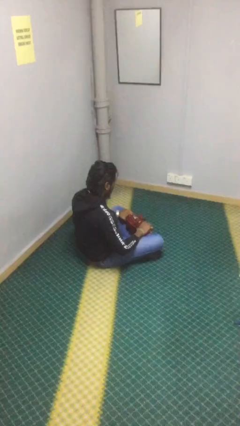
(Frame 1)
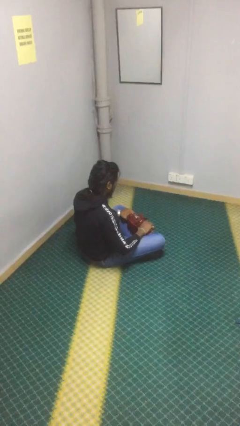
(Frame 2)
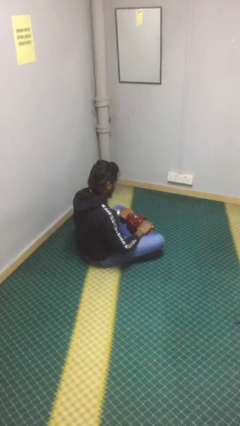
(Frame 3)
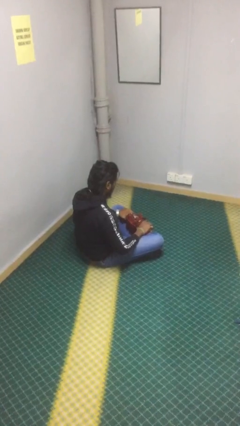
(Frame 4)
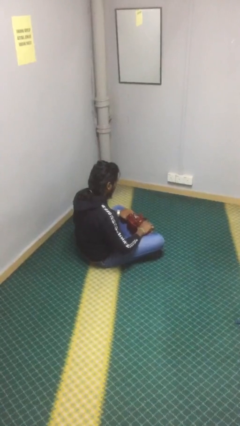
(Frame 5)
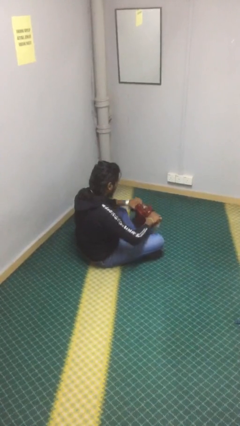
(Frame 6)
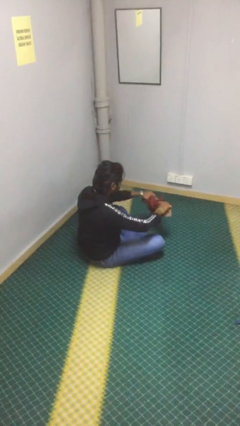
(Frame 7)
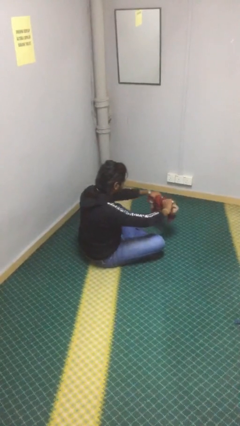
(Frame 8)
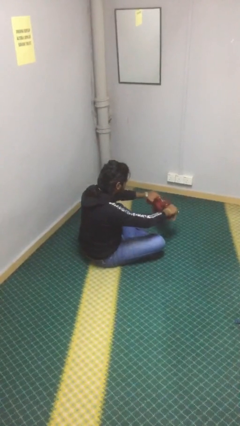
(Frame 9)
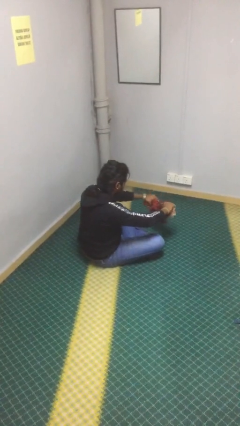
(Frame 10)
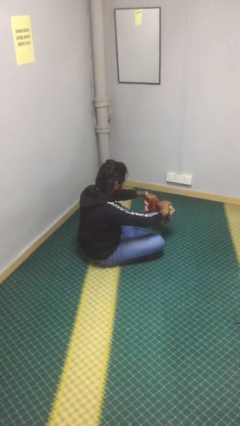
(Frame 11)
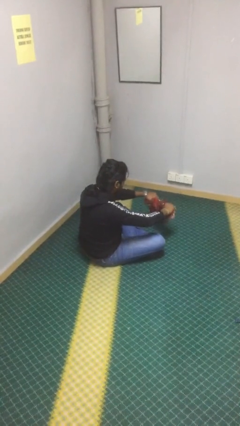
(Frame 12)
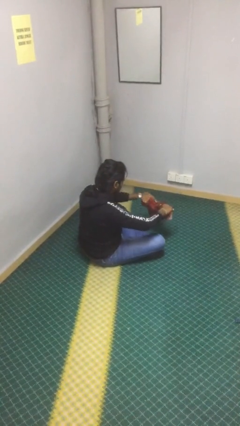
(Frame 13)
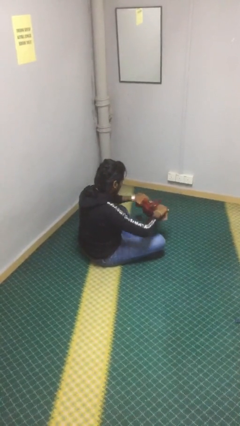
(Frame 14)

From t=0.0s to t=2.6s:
person squeezes object

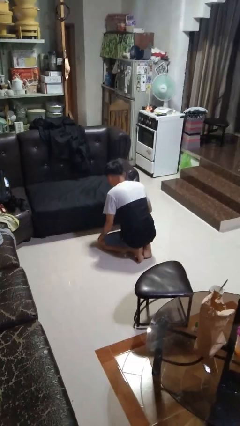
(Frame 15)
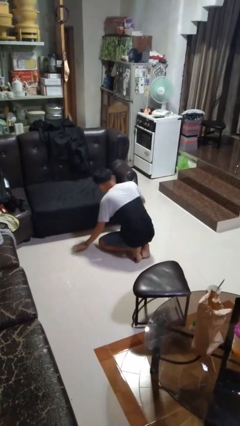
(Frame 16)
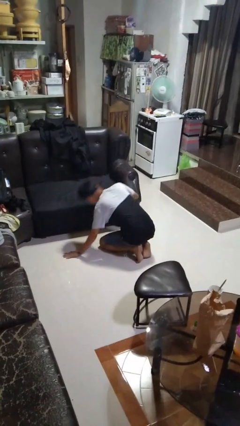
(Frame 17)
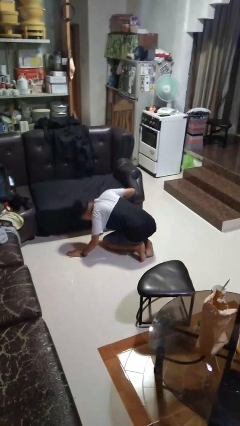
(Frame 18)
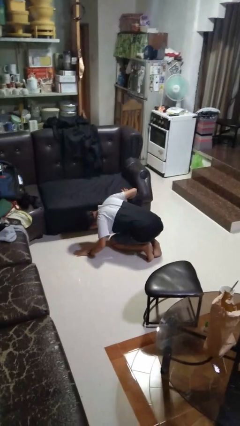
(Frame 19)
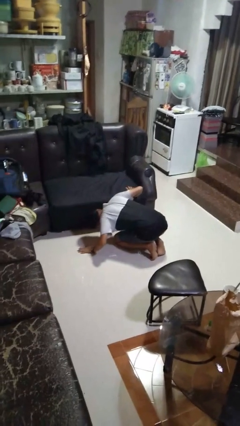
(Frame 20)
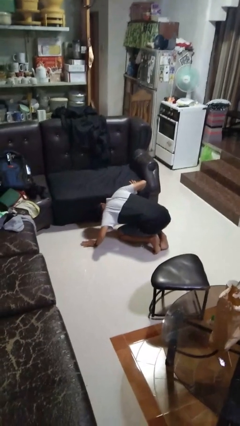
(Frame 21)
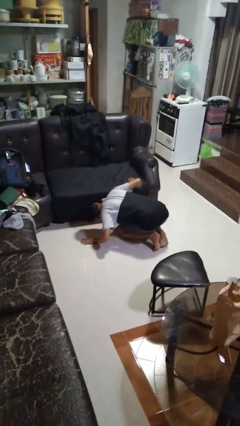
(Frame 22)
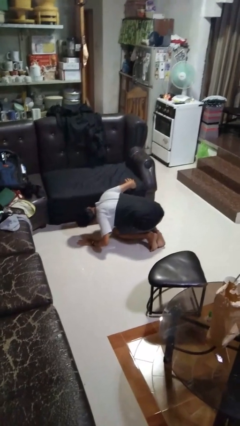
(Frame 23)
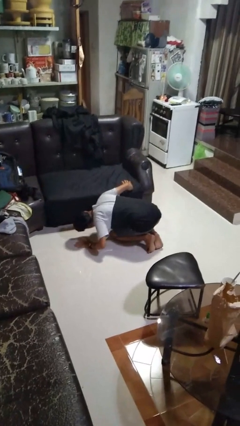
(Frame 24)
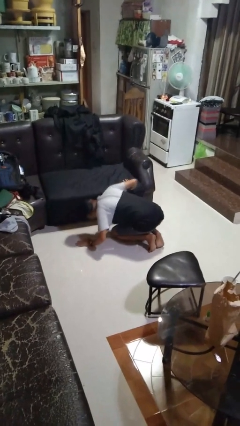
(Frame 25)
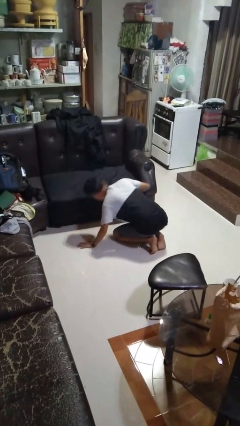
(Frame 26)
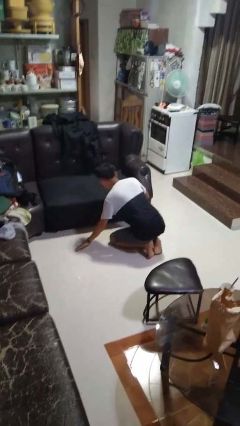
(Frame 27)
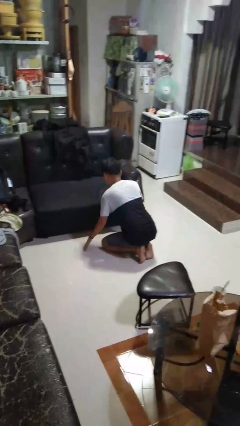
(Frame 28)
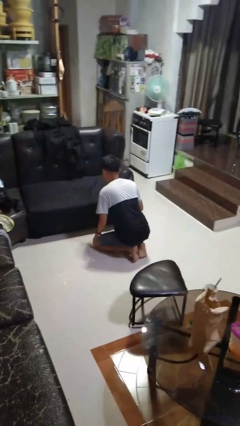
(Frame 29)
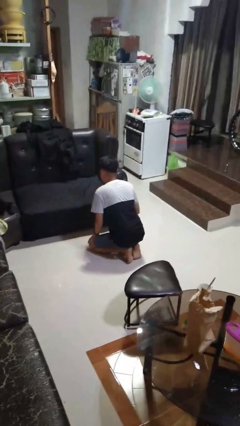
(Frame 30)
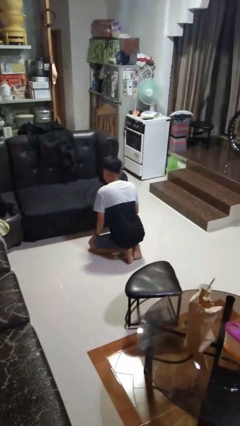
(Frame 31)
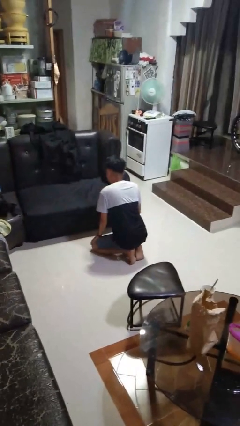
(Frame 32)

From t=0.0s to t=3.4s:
person searches under couch

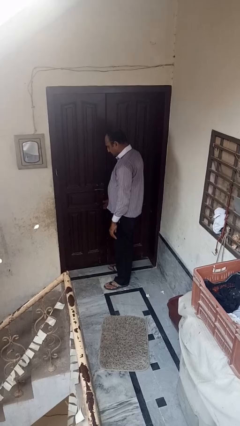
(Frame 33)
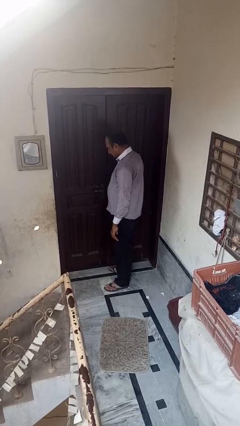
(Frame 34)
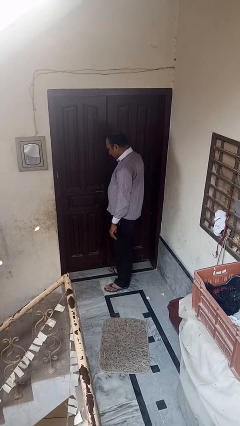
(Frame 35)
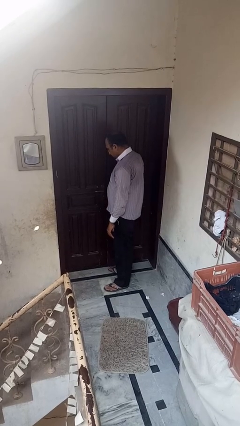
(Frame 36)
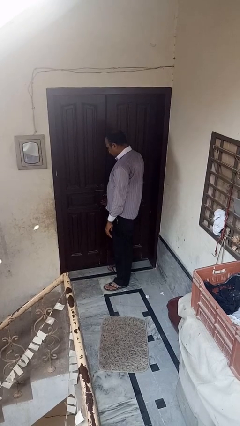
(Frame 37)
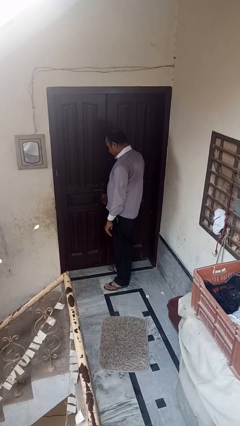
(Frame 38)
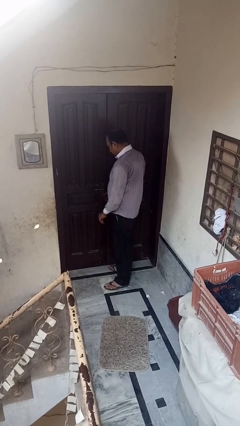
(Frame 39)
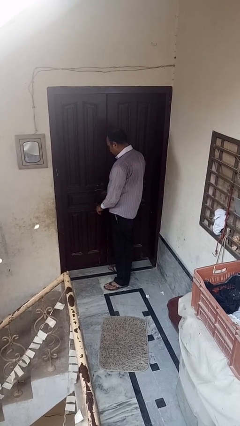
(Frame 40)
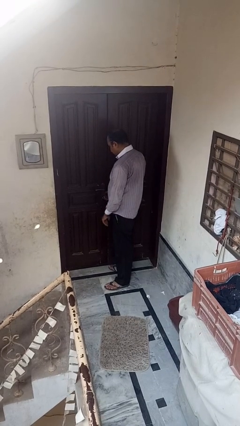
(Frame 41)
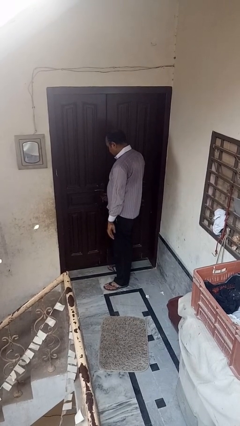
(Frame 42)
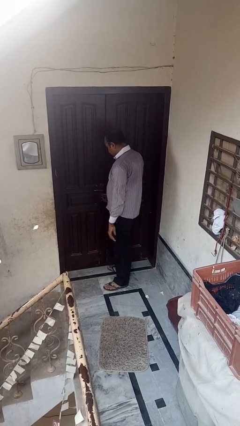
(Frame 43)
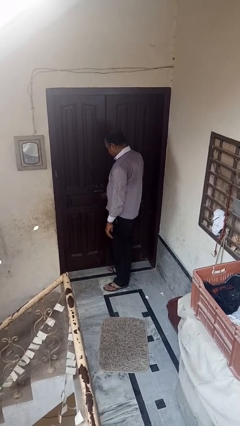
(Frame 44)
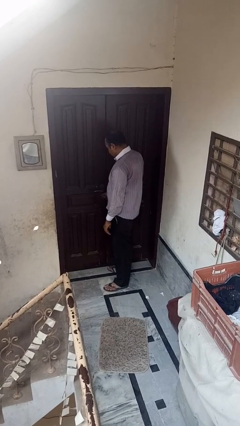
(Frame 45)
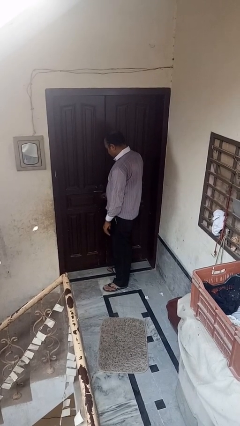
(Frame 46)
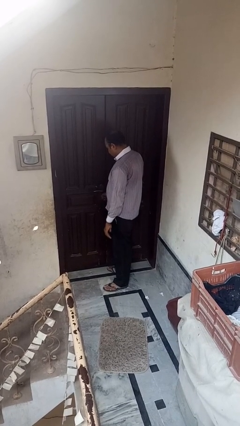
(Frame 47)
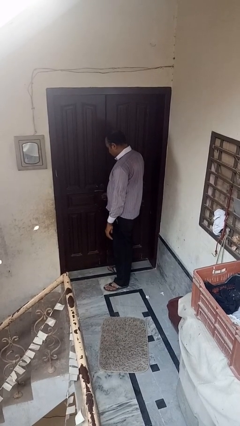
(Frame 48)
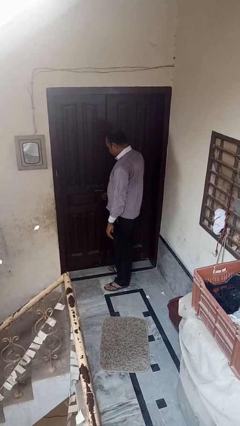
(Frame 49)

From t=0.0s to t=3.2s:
person unlocks door with keys

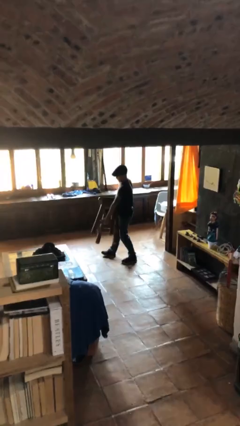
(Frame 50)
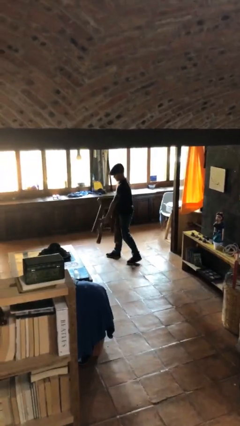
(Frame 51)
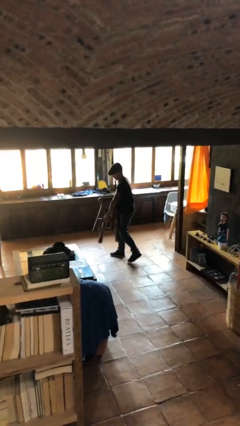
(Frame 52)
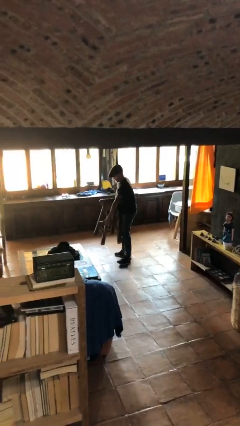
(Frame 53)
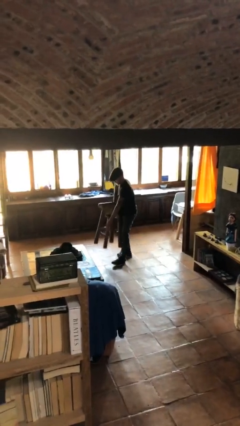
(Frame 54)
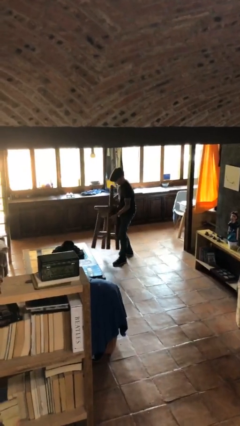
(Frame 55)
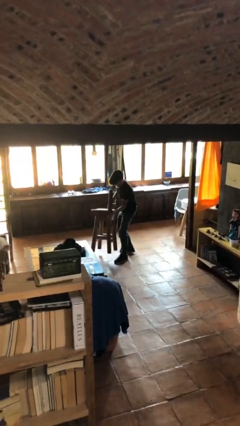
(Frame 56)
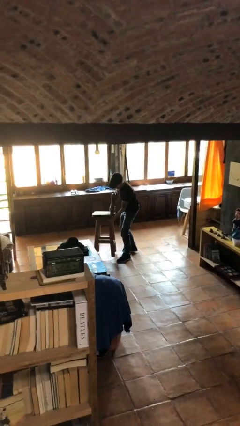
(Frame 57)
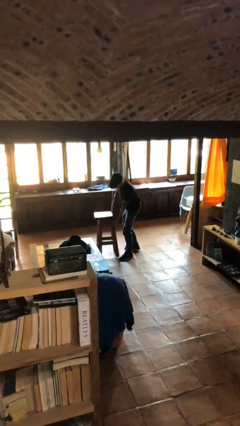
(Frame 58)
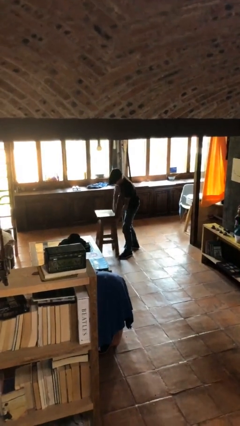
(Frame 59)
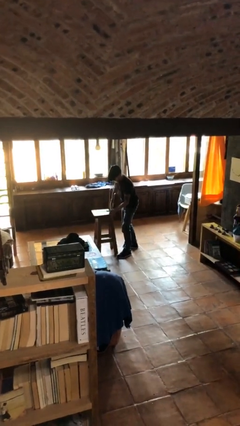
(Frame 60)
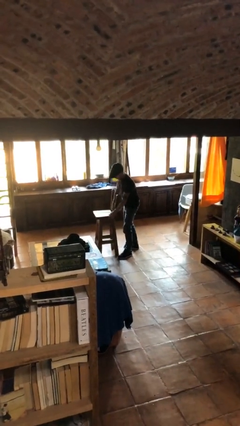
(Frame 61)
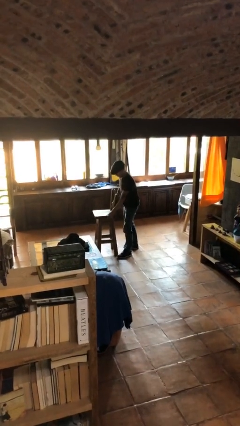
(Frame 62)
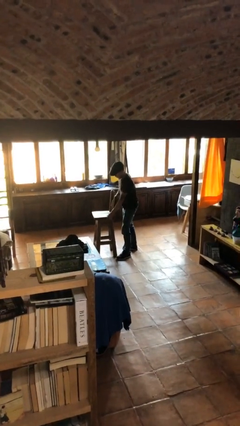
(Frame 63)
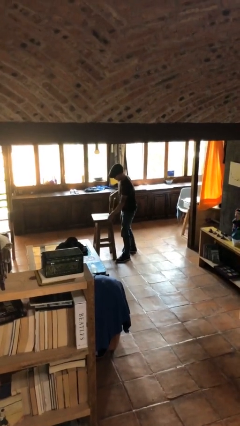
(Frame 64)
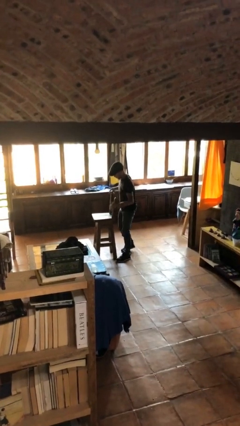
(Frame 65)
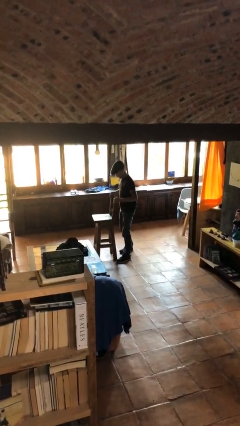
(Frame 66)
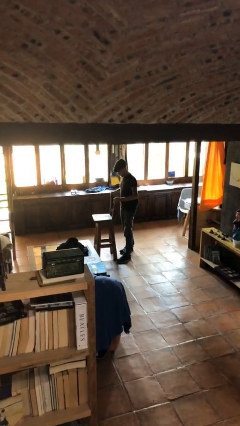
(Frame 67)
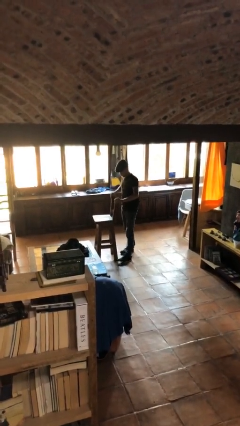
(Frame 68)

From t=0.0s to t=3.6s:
person puts down object on floor

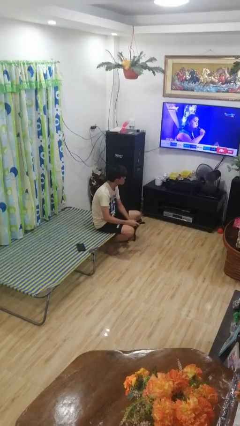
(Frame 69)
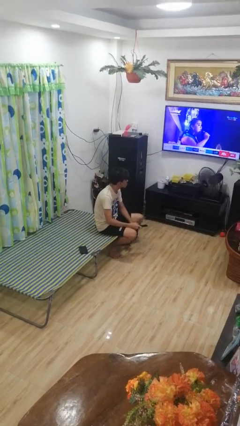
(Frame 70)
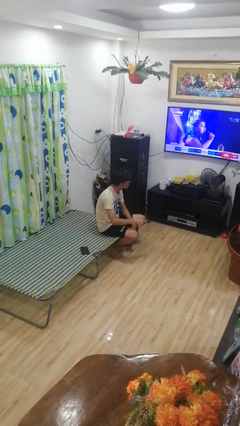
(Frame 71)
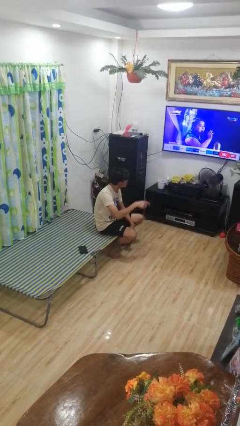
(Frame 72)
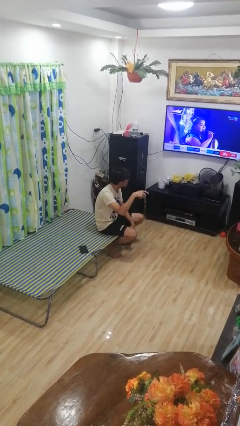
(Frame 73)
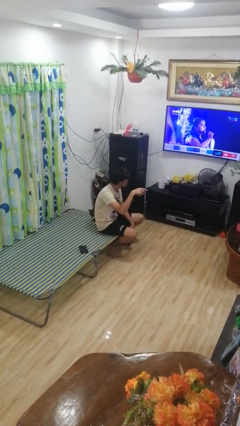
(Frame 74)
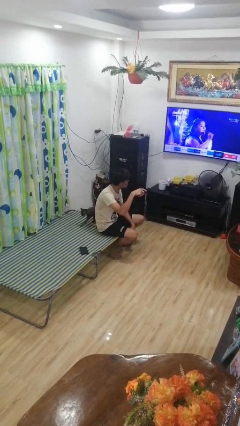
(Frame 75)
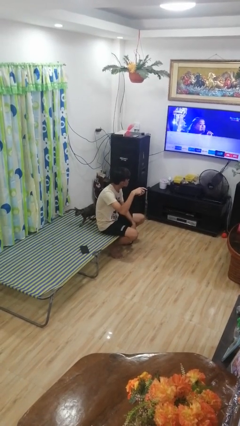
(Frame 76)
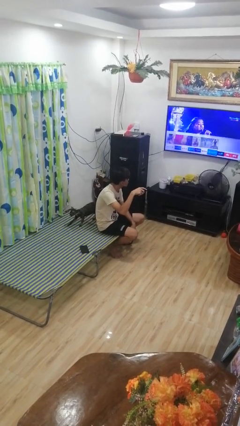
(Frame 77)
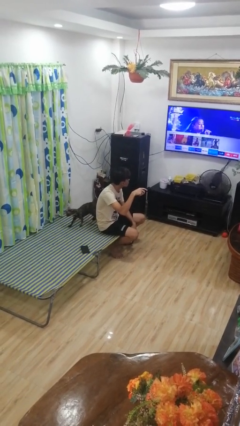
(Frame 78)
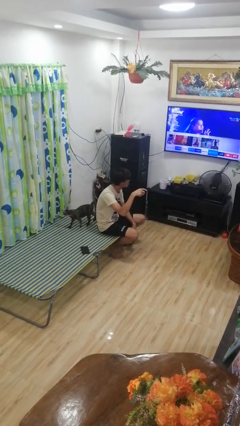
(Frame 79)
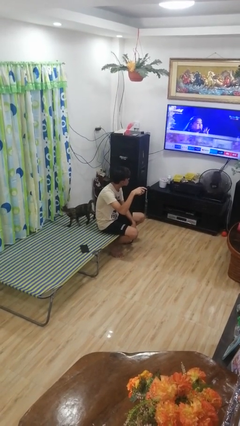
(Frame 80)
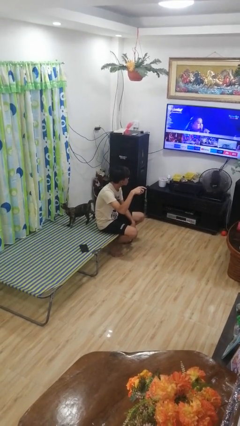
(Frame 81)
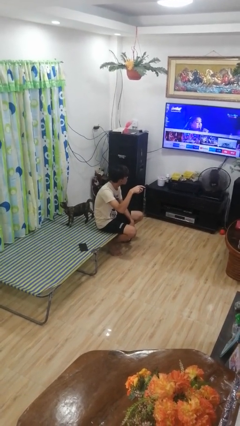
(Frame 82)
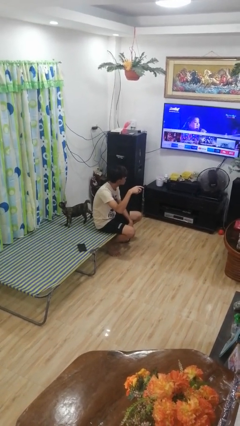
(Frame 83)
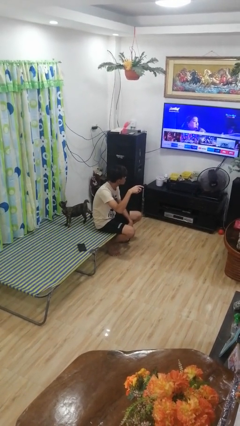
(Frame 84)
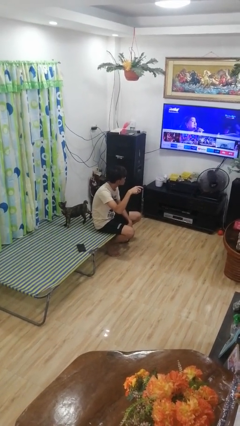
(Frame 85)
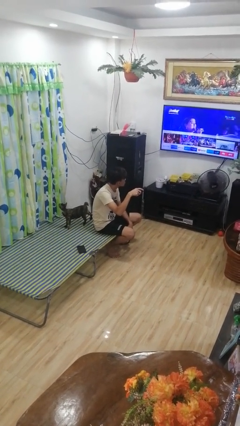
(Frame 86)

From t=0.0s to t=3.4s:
person uses television remote

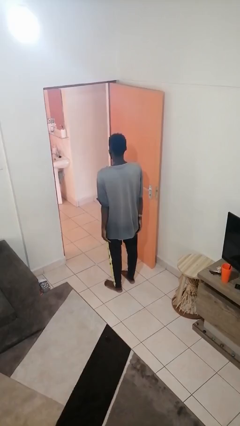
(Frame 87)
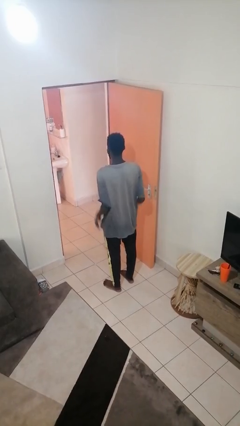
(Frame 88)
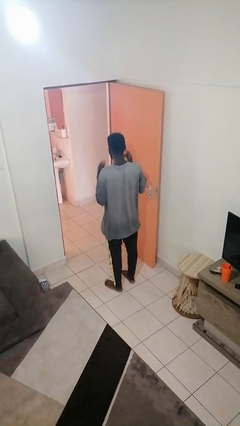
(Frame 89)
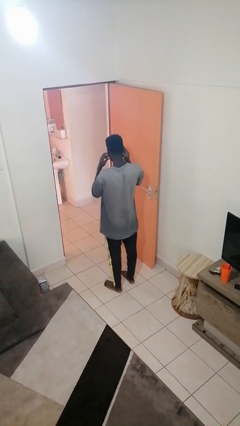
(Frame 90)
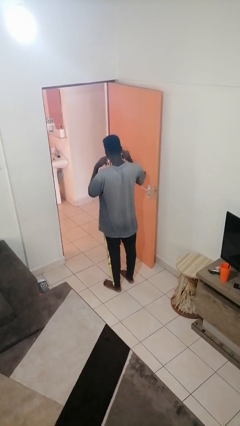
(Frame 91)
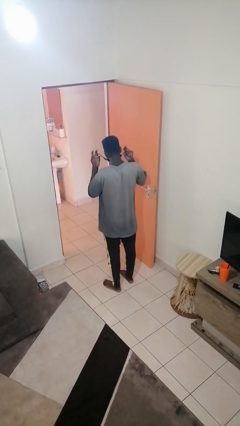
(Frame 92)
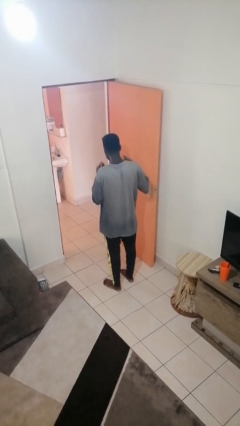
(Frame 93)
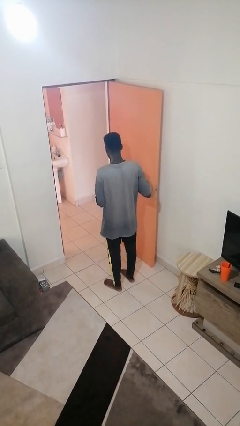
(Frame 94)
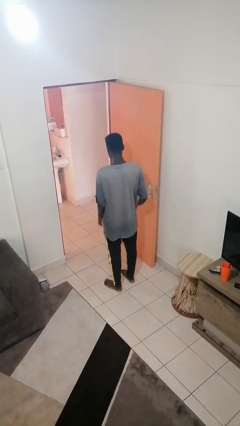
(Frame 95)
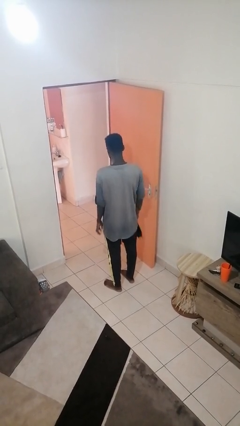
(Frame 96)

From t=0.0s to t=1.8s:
person takes off facemask
